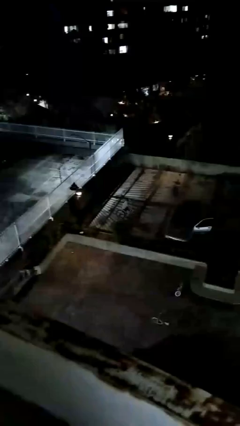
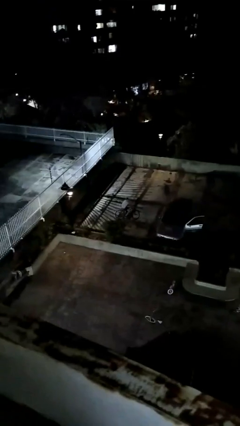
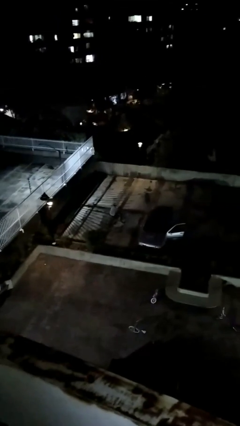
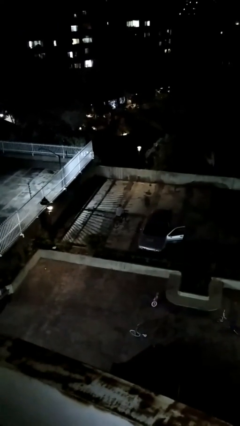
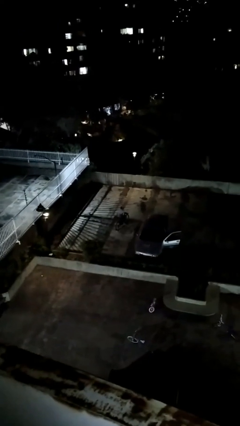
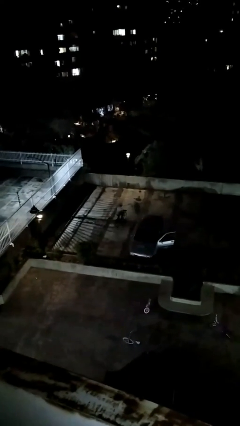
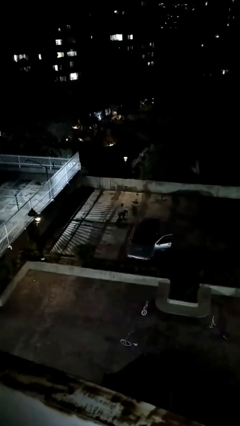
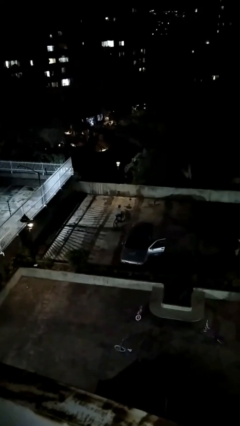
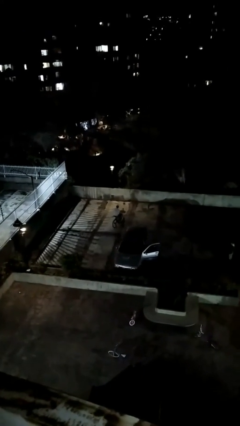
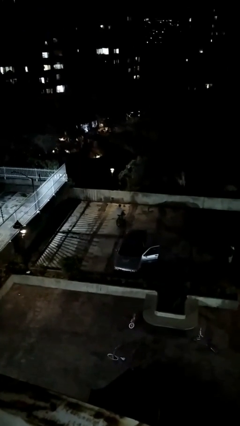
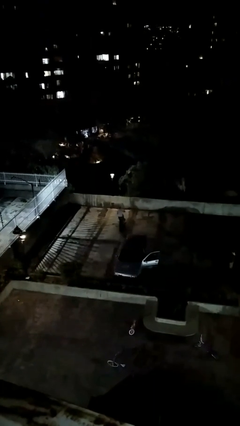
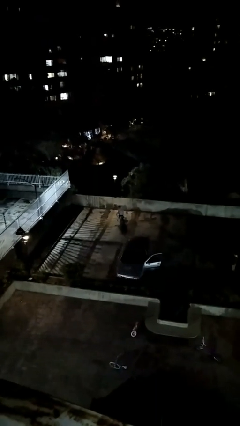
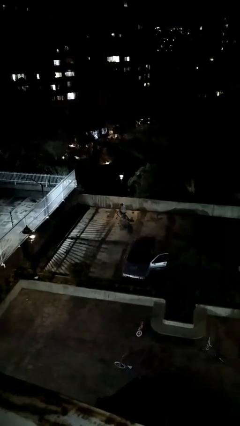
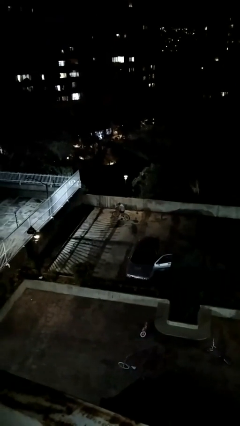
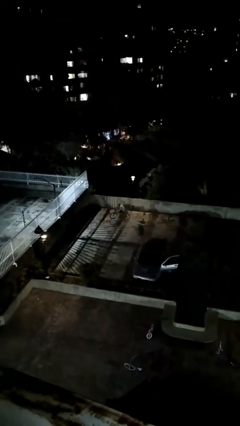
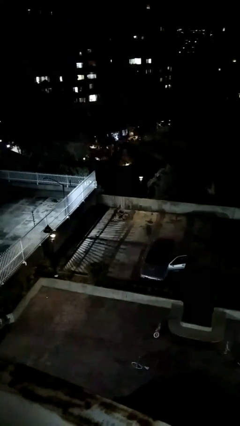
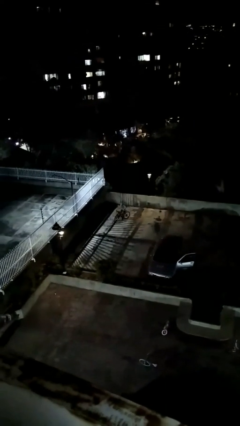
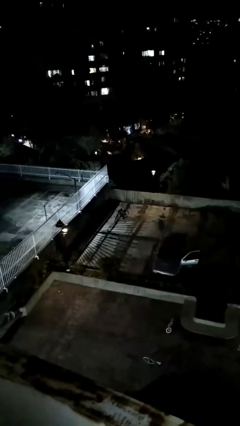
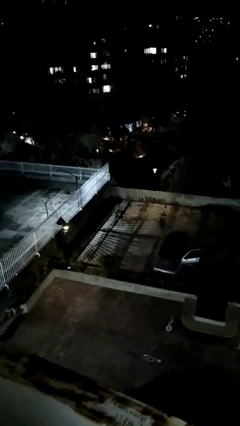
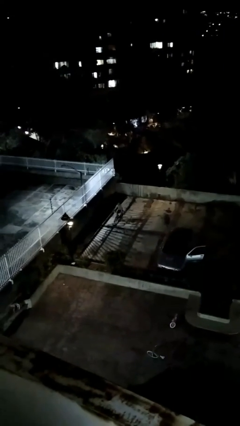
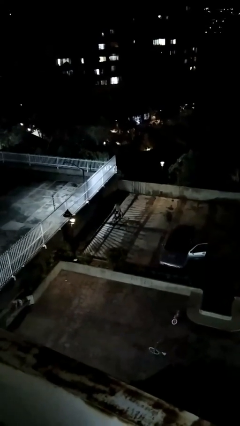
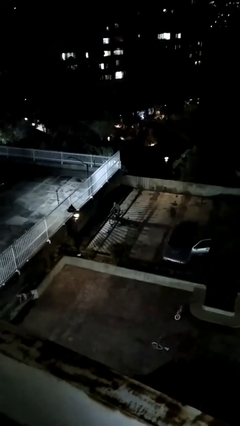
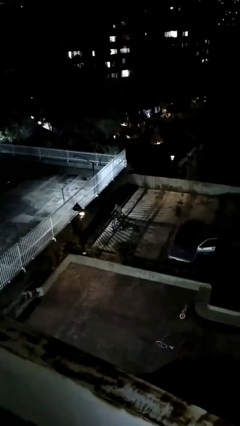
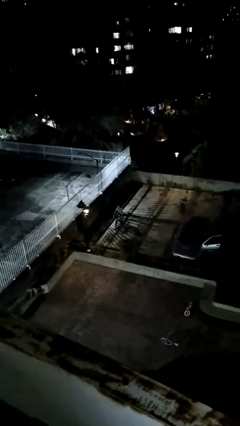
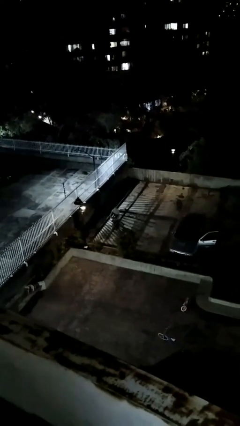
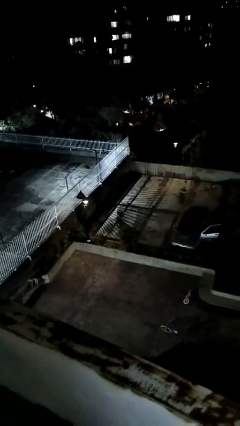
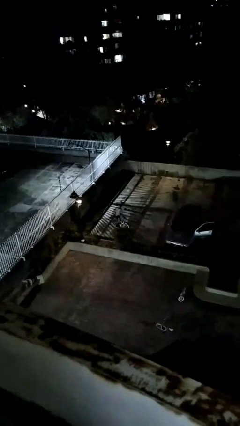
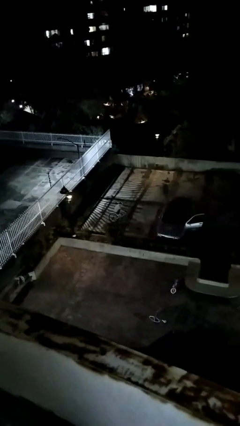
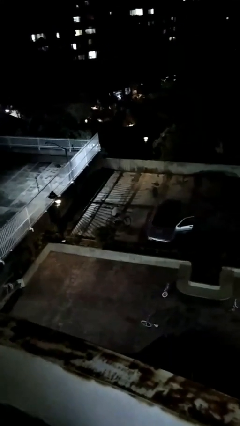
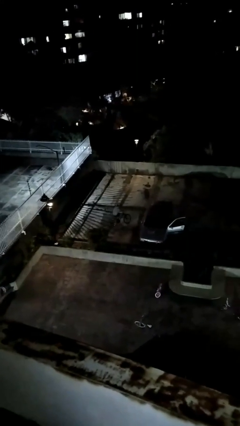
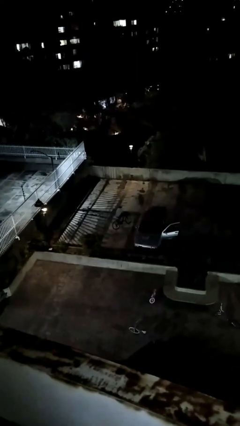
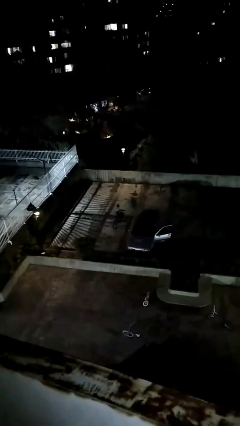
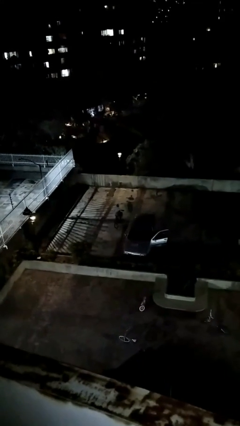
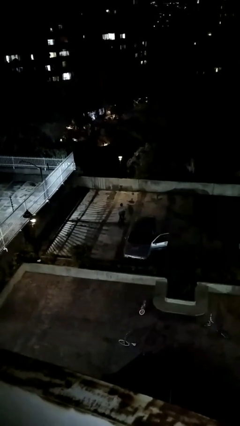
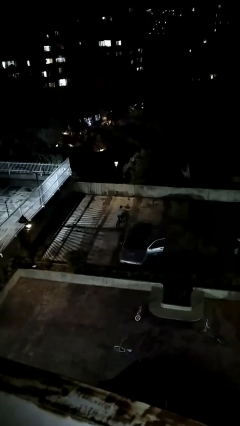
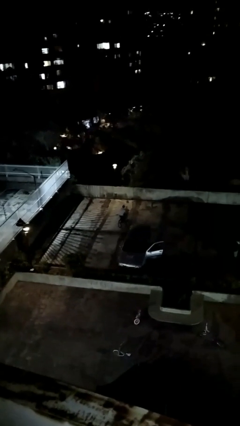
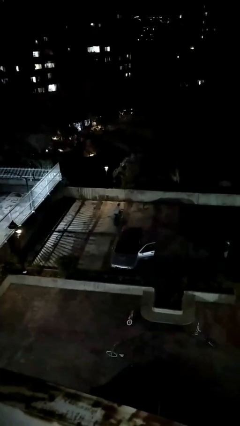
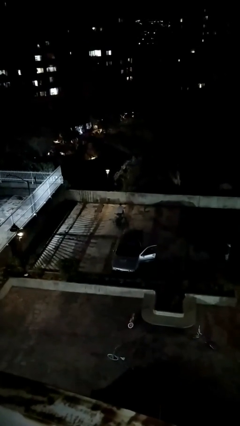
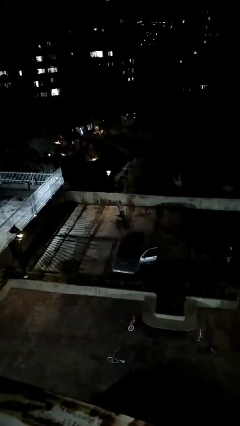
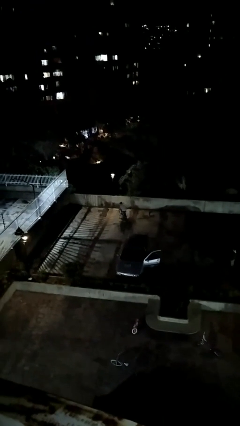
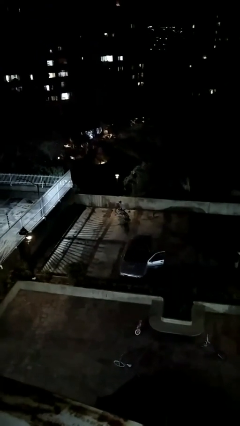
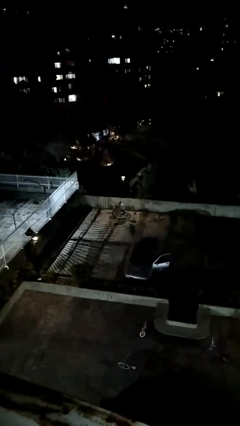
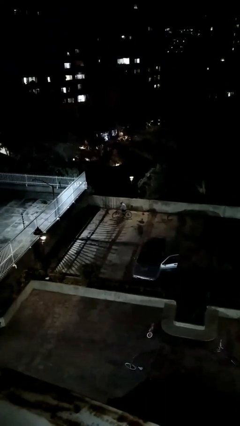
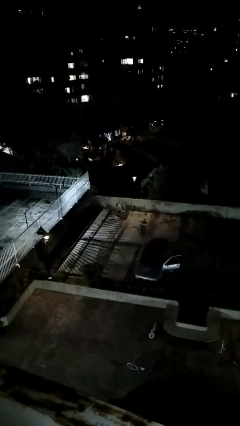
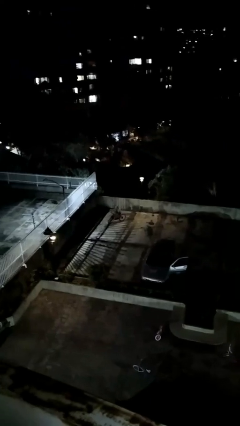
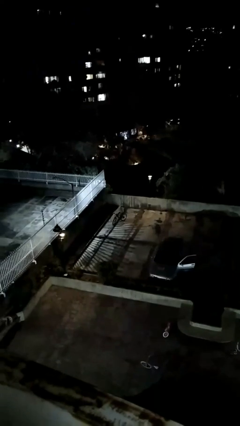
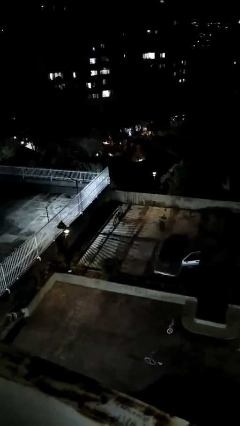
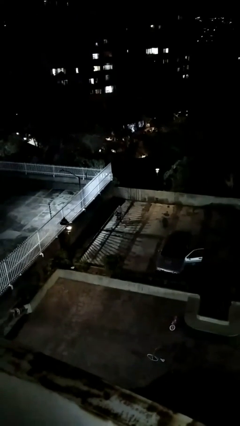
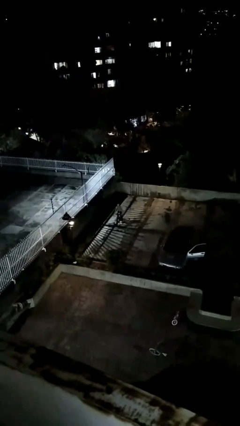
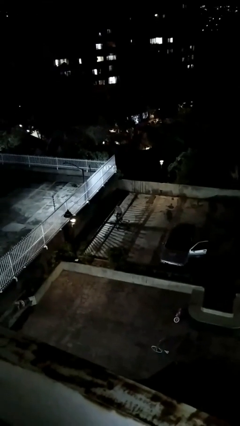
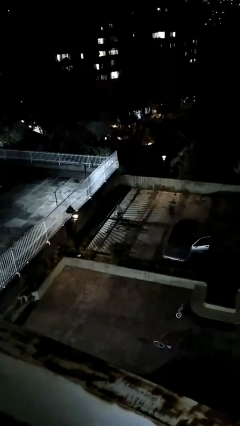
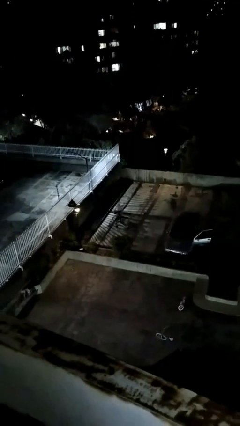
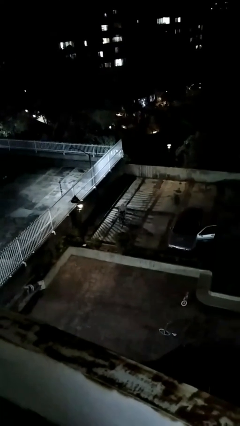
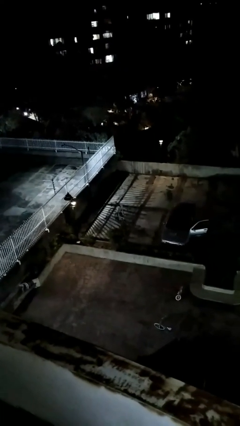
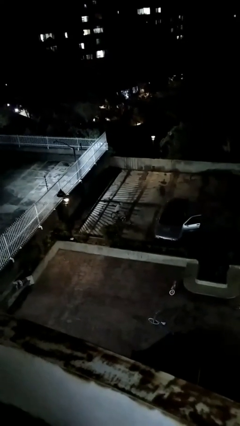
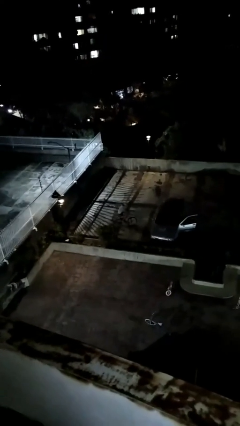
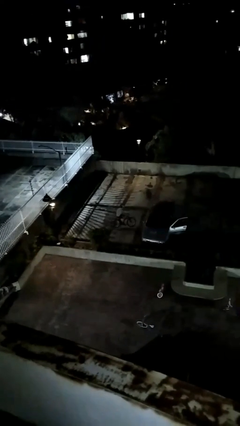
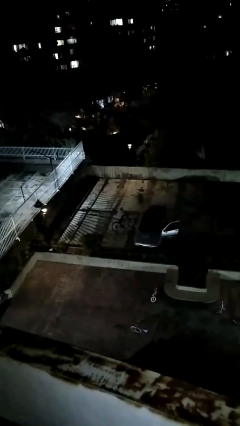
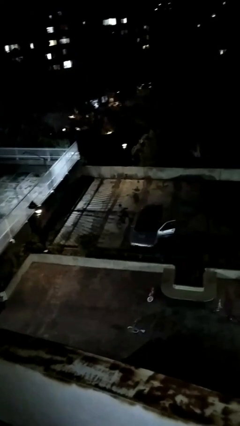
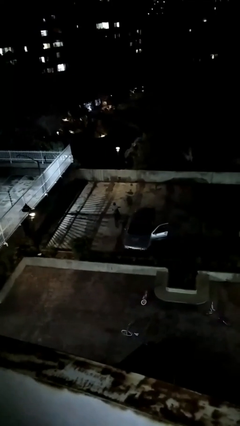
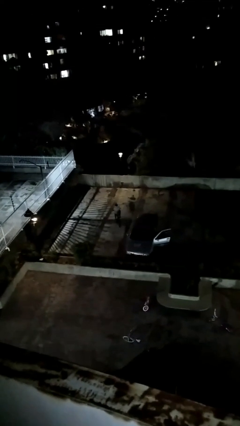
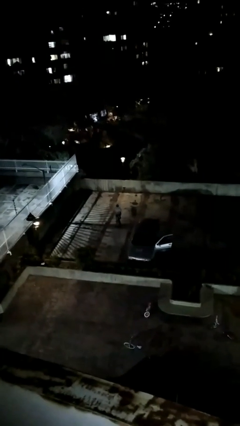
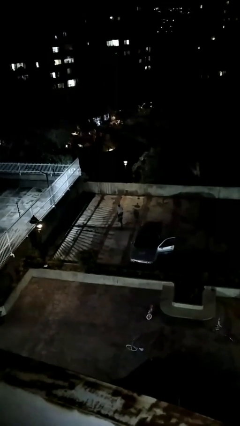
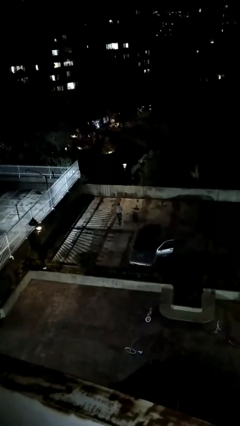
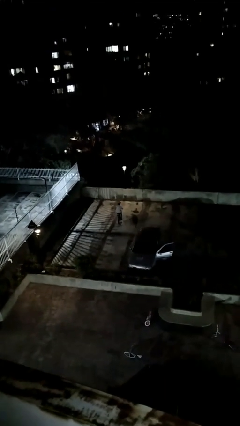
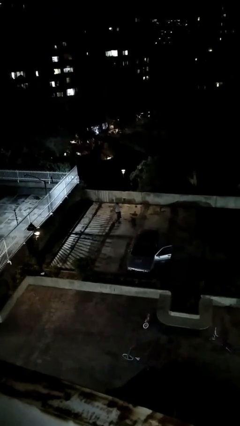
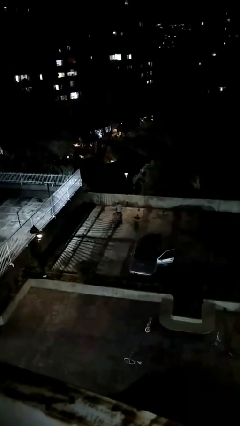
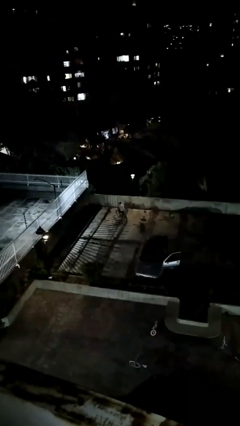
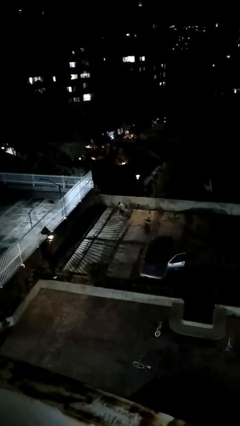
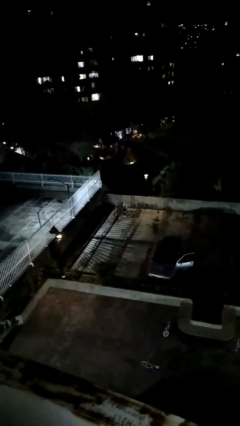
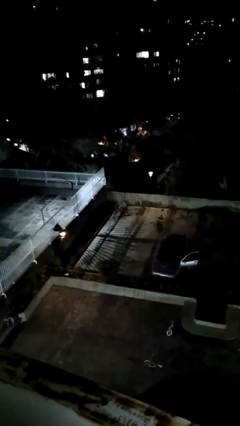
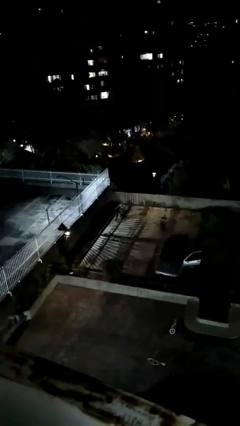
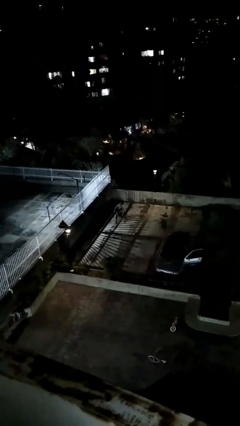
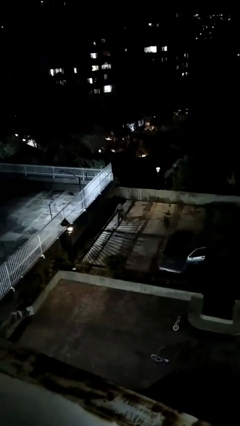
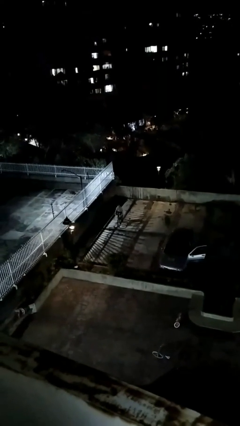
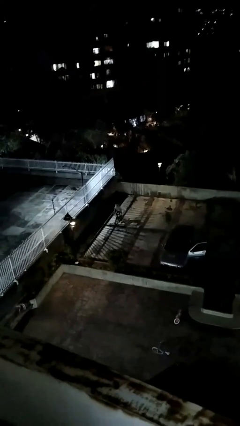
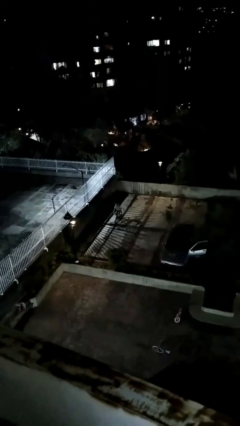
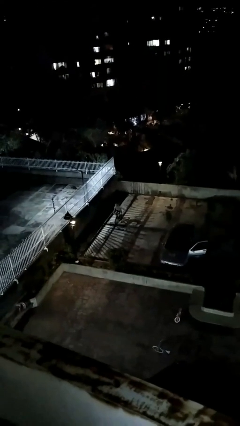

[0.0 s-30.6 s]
person rides bicycle

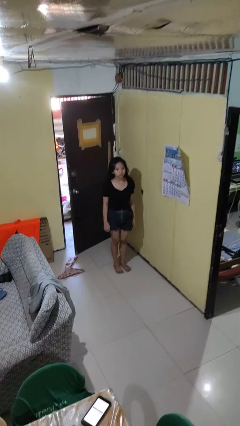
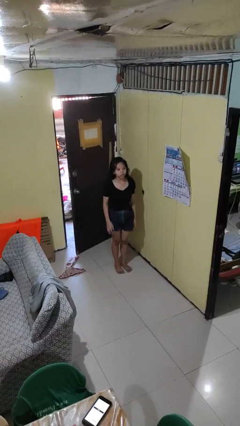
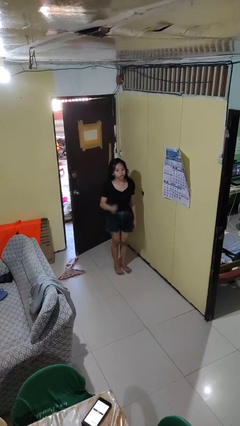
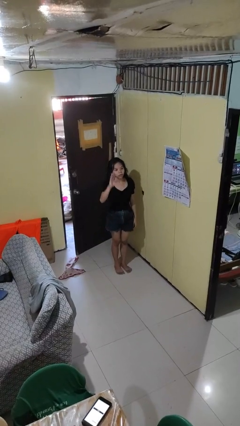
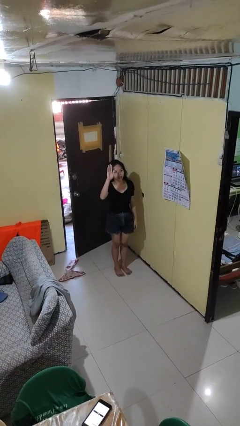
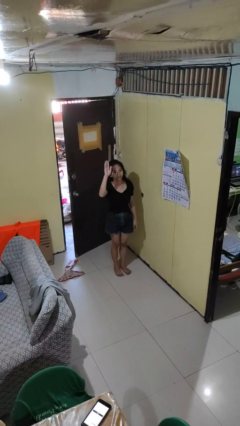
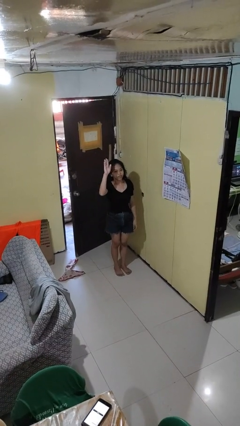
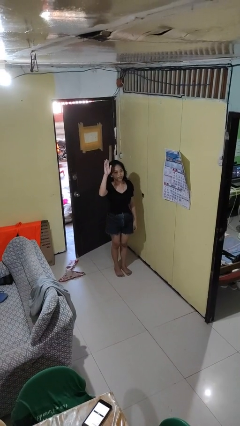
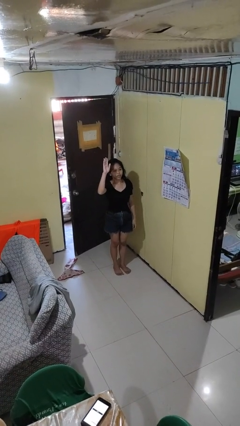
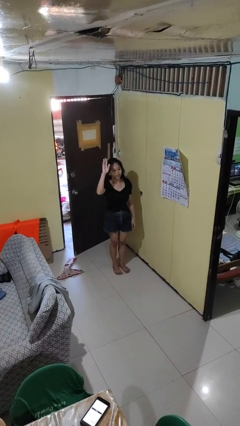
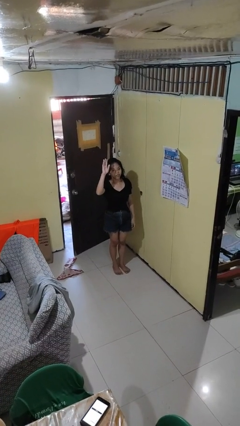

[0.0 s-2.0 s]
person gestures raise hand

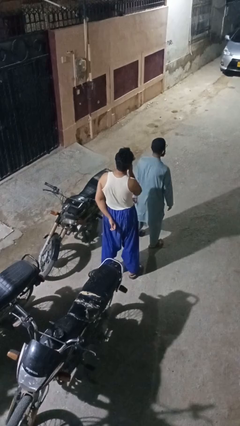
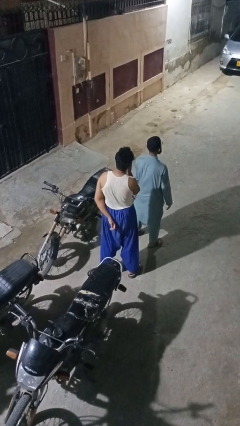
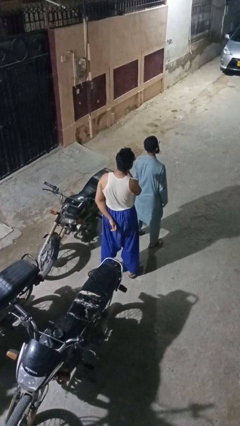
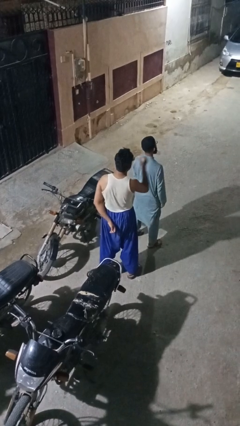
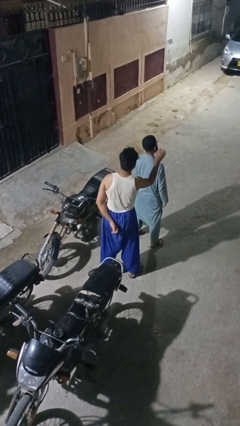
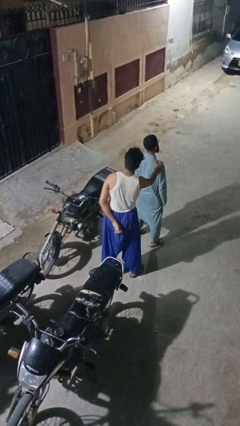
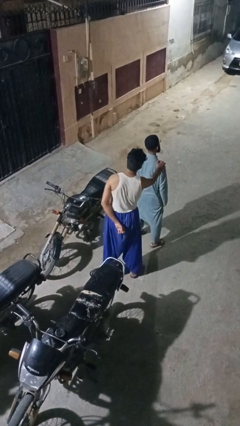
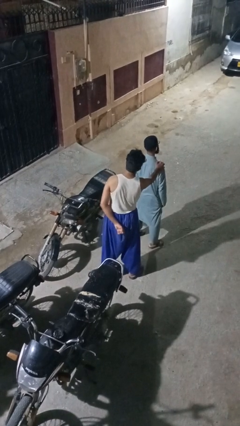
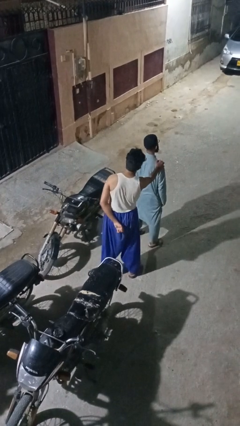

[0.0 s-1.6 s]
person grabs person by shoulder
